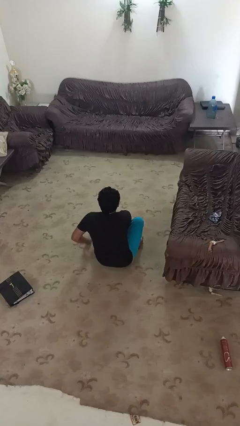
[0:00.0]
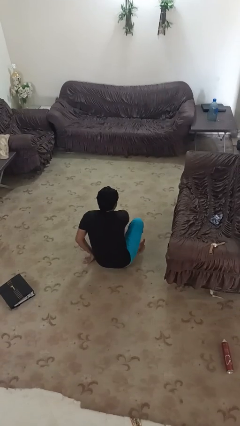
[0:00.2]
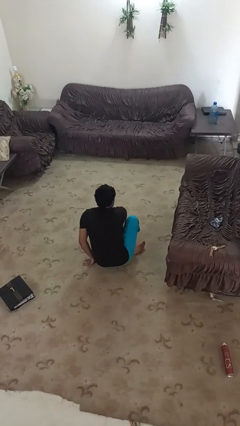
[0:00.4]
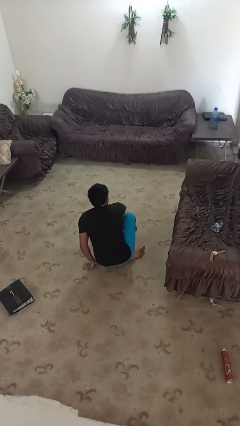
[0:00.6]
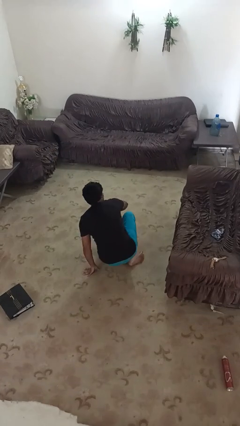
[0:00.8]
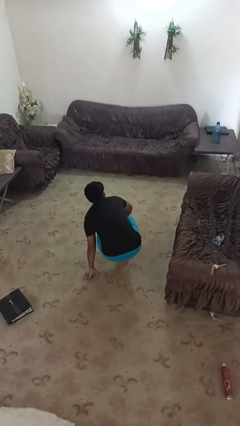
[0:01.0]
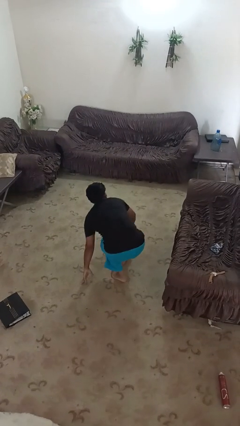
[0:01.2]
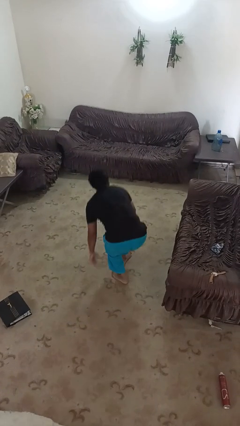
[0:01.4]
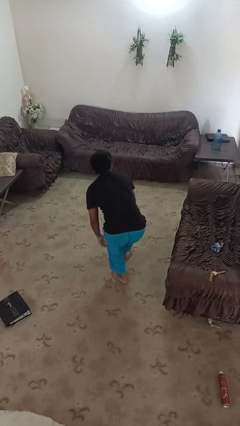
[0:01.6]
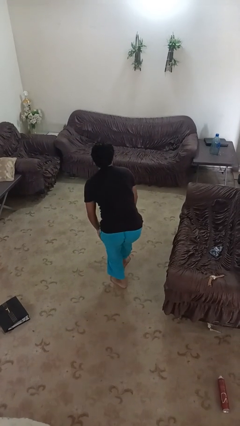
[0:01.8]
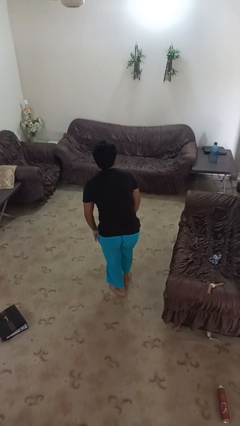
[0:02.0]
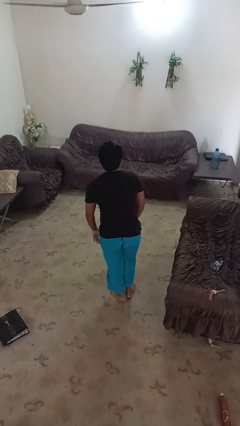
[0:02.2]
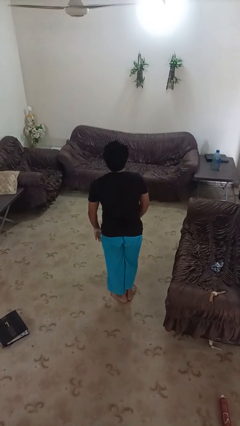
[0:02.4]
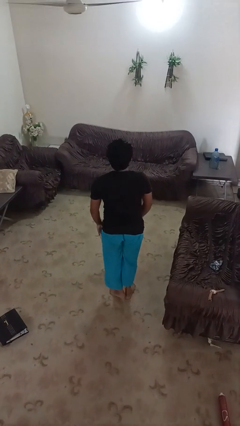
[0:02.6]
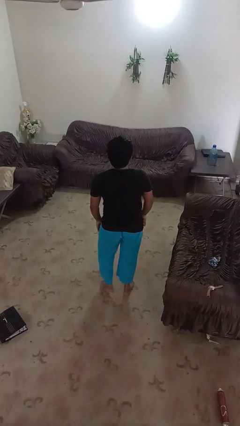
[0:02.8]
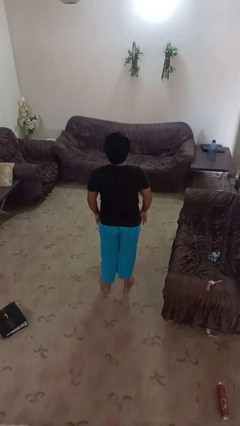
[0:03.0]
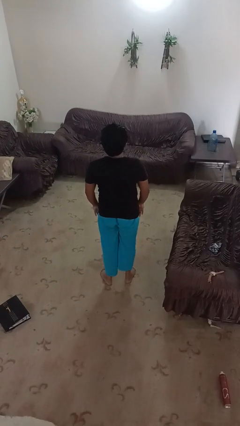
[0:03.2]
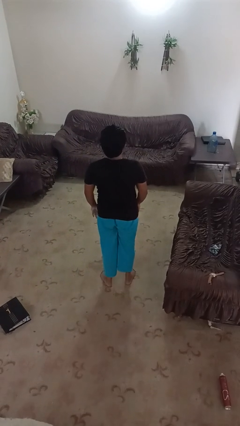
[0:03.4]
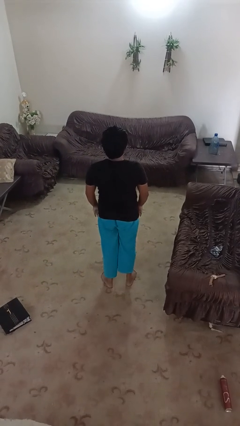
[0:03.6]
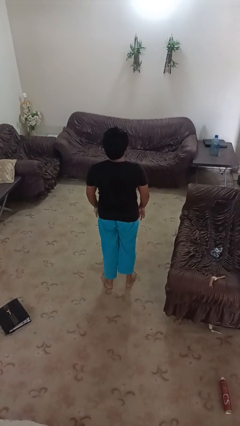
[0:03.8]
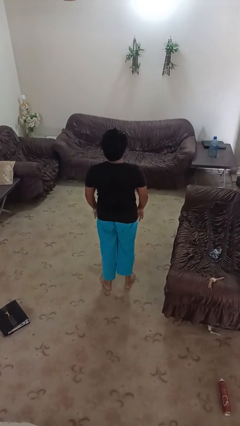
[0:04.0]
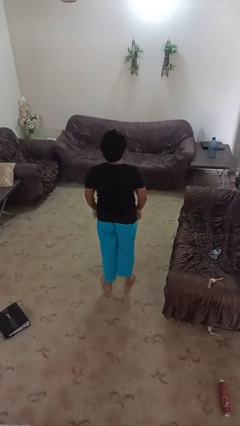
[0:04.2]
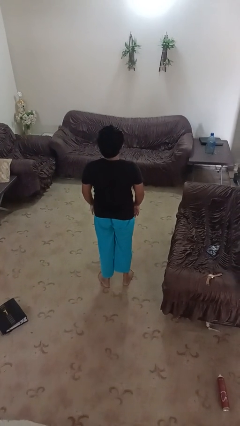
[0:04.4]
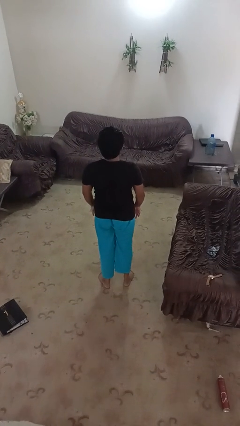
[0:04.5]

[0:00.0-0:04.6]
person stands up from floor

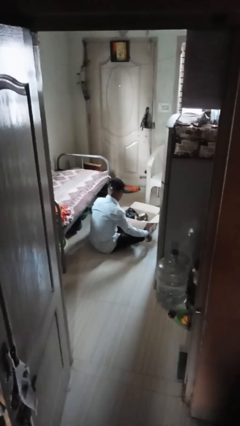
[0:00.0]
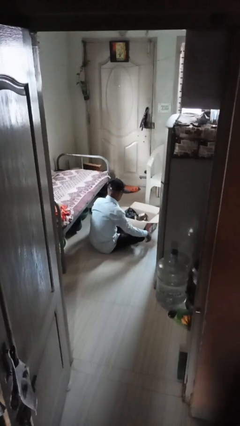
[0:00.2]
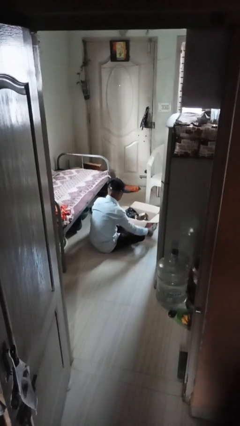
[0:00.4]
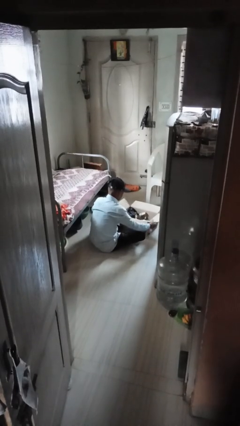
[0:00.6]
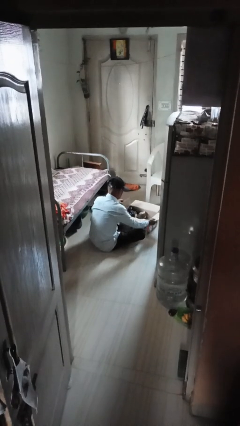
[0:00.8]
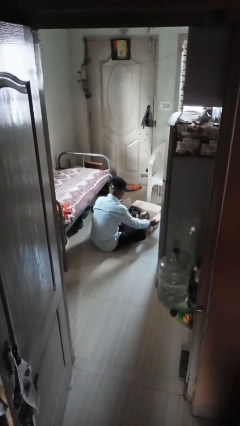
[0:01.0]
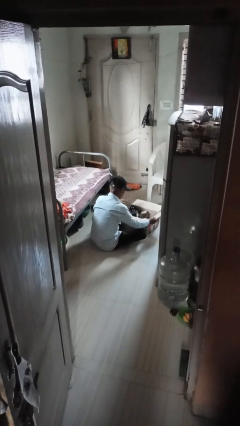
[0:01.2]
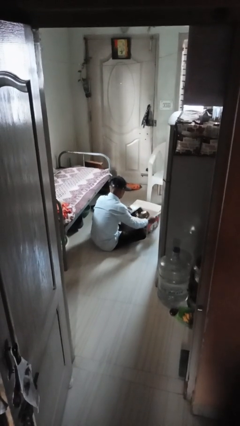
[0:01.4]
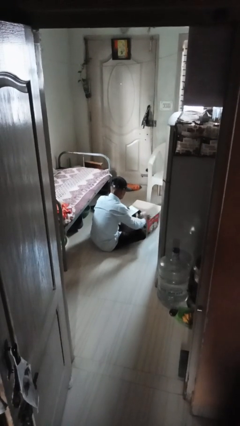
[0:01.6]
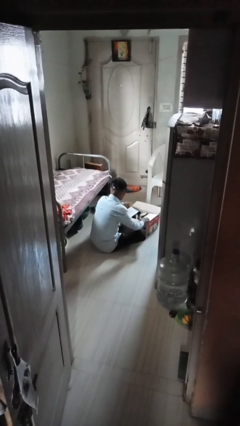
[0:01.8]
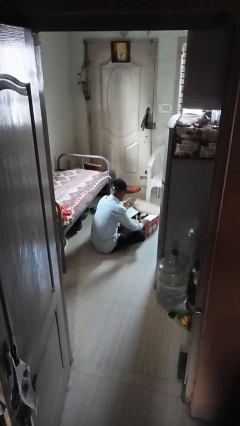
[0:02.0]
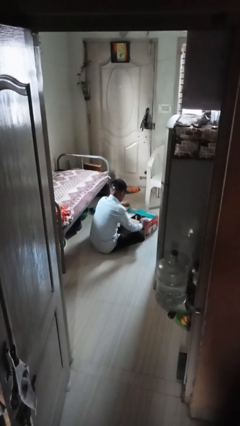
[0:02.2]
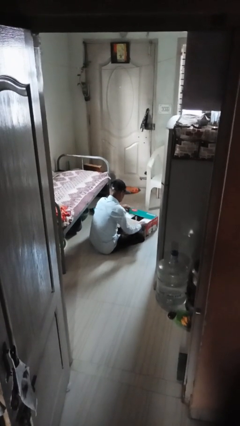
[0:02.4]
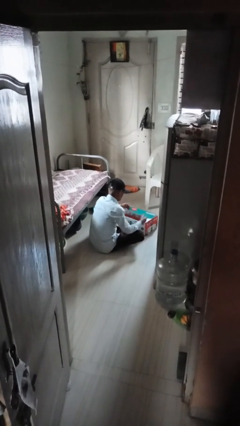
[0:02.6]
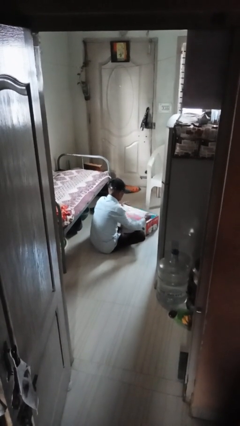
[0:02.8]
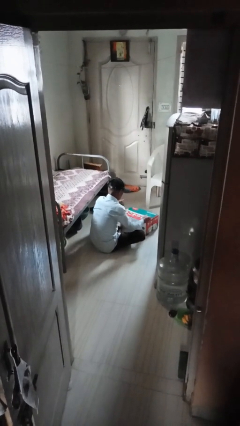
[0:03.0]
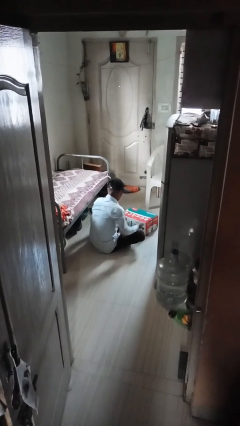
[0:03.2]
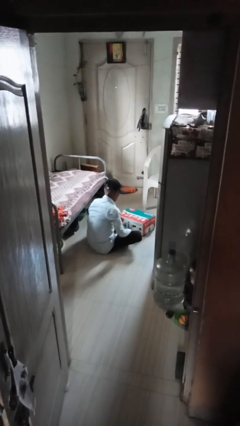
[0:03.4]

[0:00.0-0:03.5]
person closes box

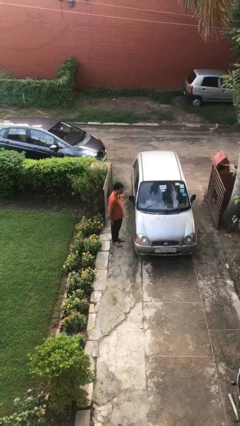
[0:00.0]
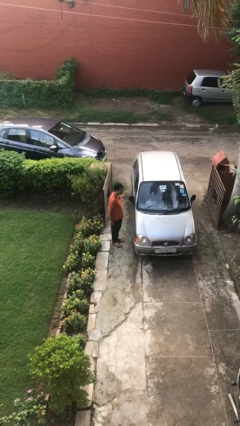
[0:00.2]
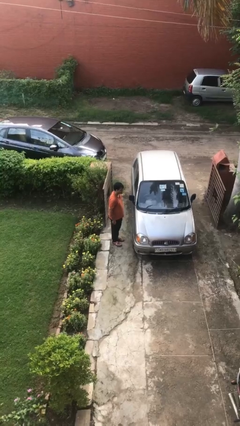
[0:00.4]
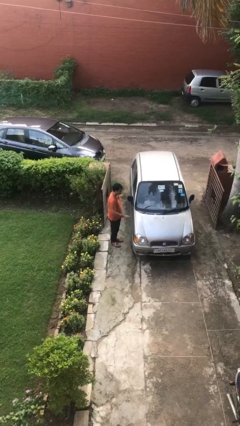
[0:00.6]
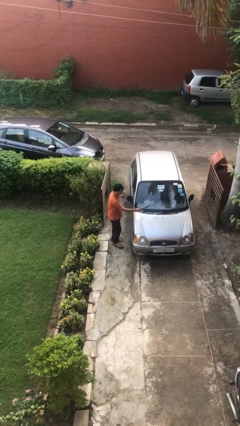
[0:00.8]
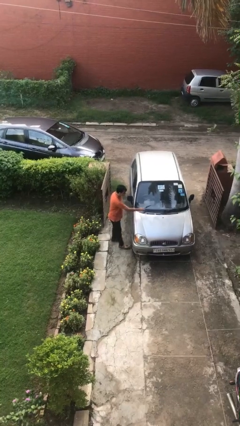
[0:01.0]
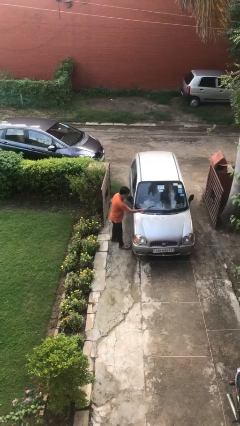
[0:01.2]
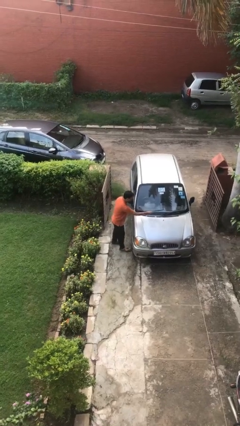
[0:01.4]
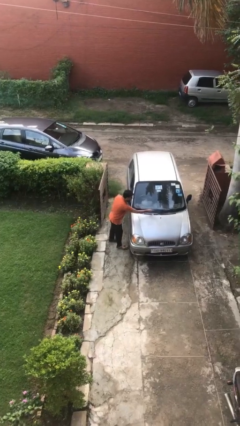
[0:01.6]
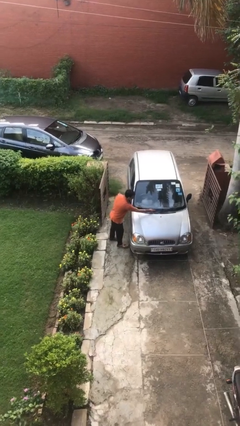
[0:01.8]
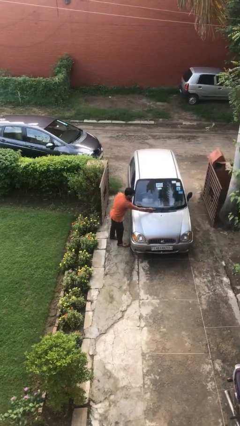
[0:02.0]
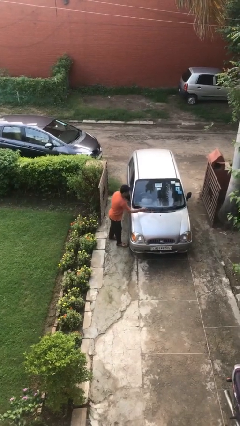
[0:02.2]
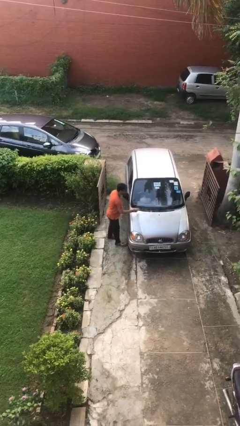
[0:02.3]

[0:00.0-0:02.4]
person flips down car wipers

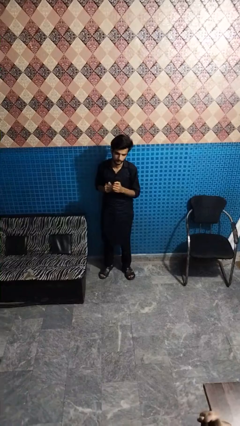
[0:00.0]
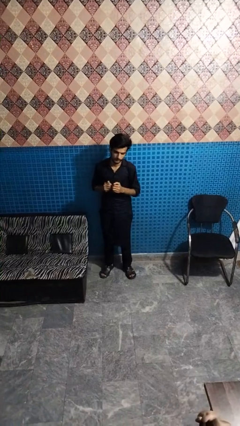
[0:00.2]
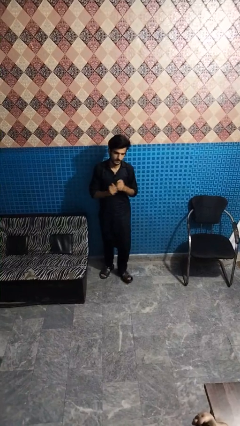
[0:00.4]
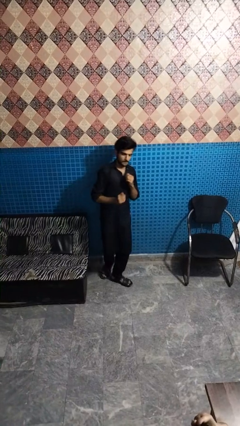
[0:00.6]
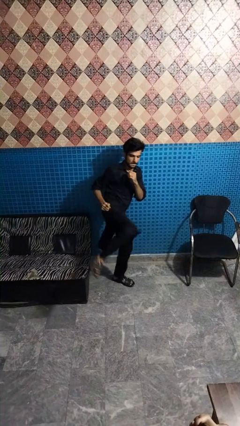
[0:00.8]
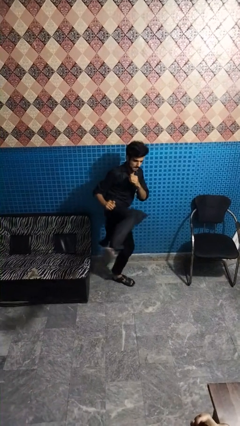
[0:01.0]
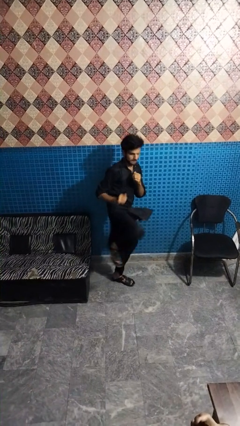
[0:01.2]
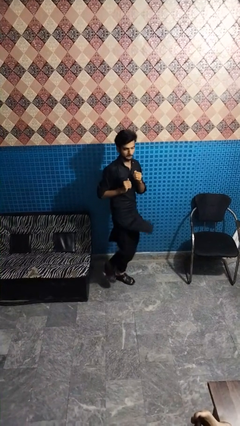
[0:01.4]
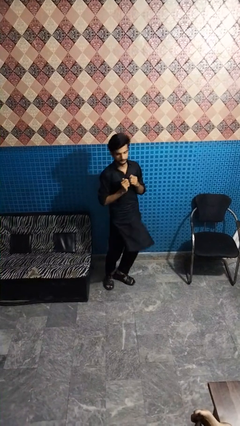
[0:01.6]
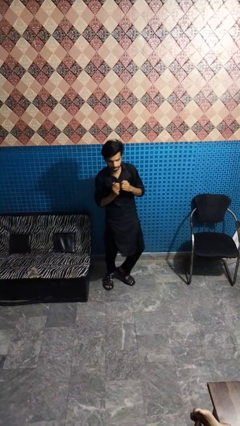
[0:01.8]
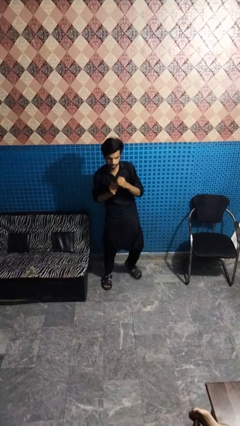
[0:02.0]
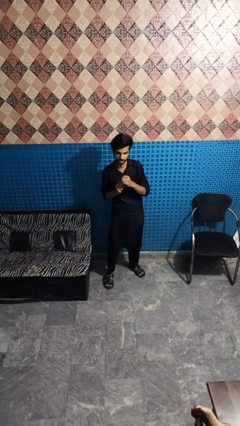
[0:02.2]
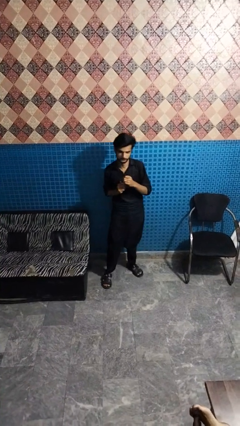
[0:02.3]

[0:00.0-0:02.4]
person karate kicks

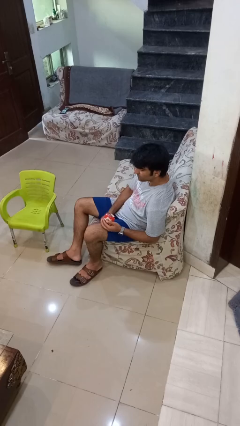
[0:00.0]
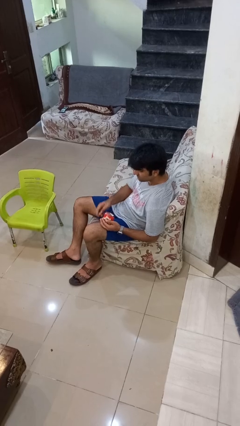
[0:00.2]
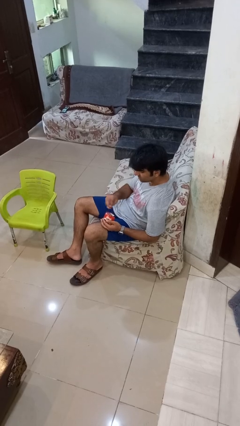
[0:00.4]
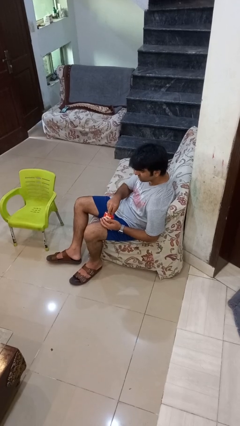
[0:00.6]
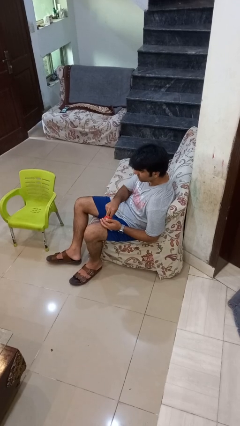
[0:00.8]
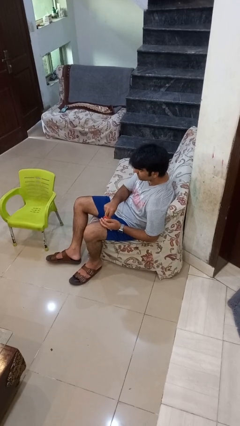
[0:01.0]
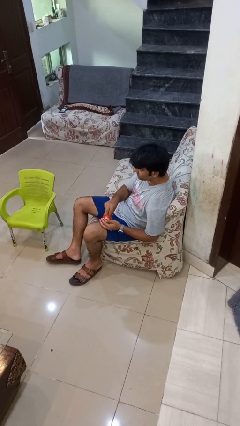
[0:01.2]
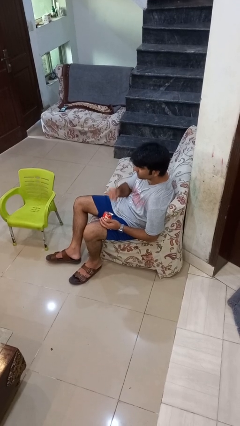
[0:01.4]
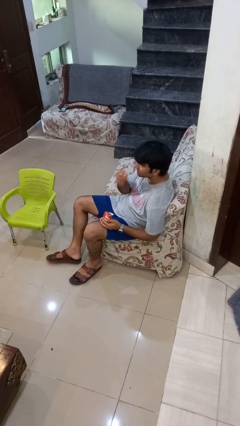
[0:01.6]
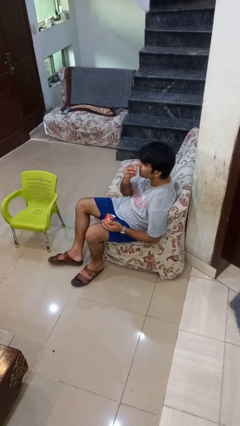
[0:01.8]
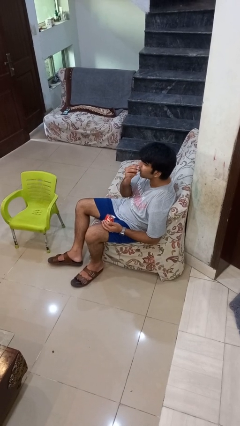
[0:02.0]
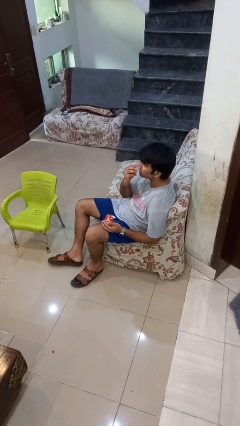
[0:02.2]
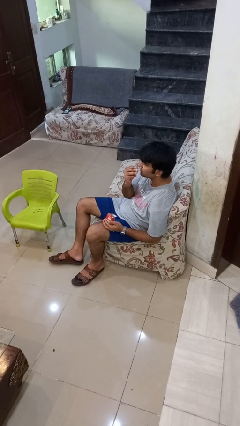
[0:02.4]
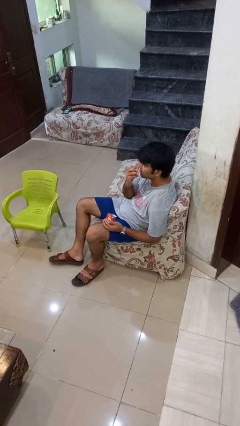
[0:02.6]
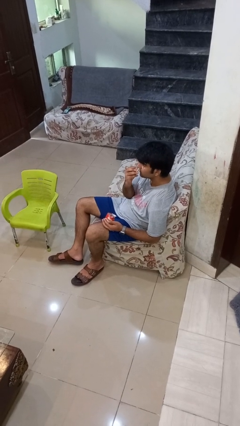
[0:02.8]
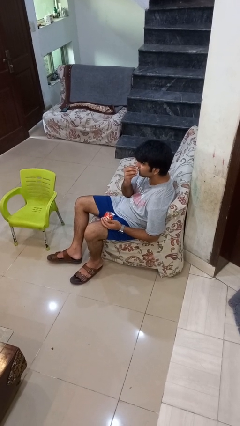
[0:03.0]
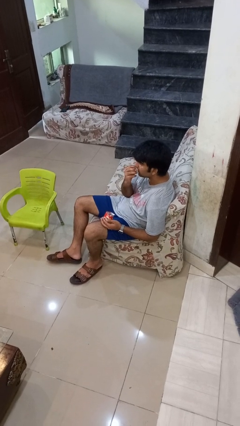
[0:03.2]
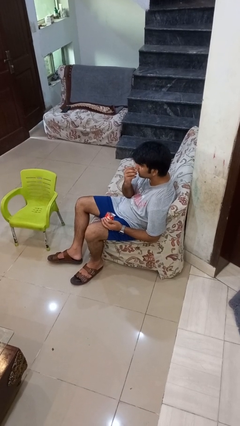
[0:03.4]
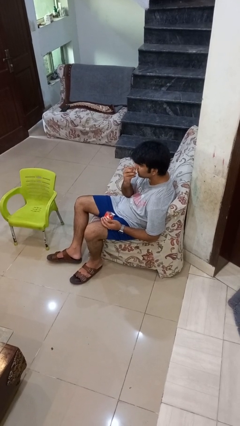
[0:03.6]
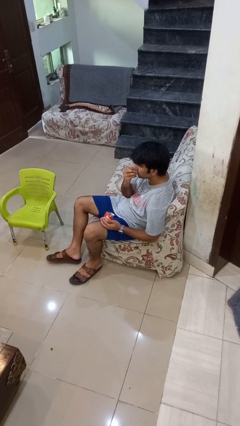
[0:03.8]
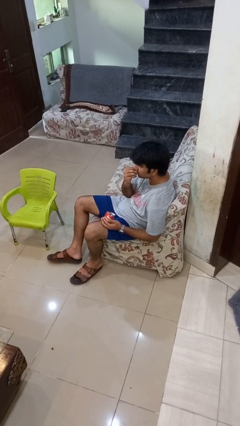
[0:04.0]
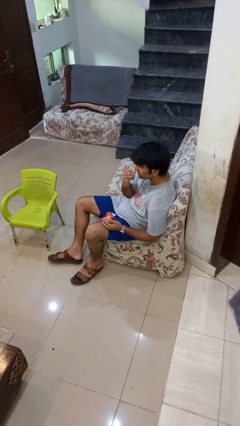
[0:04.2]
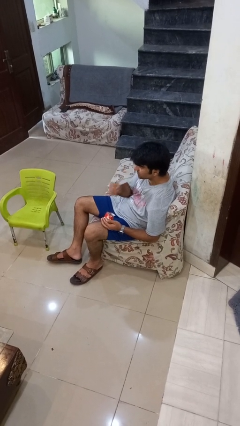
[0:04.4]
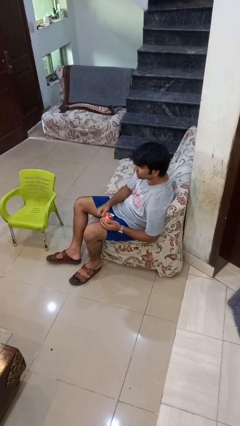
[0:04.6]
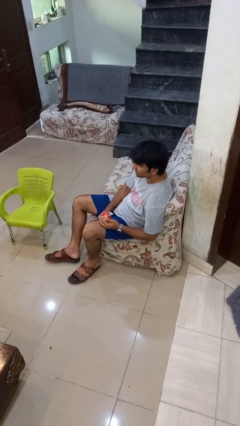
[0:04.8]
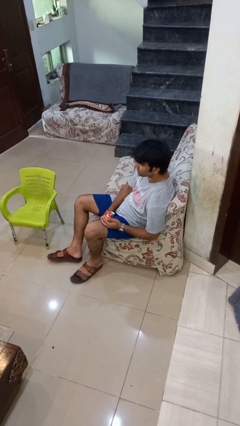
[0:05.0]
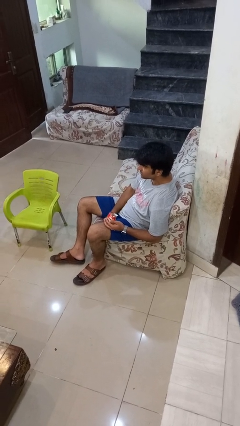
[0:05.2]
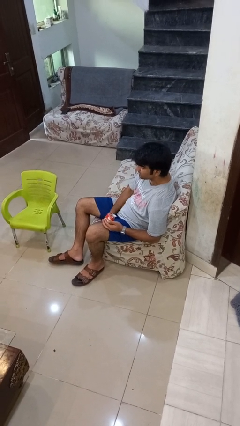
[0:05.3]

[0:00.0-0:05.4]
person eats snack from bag
